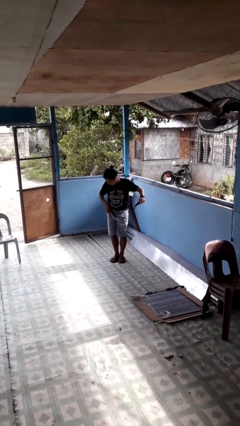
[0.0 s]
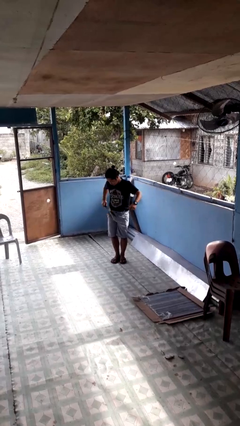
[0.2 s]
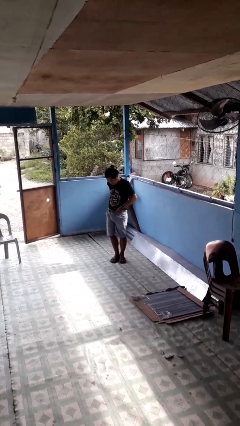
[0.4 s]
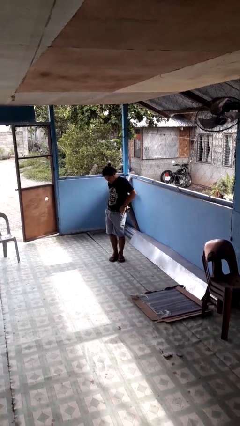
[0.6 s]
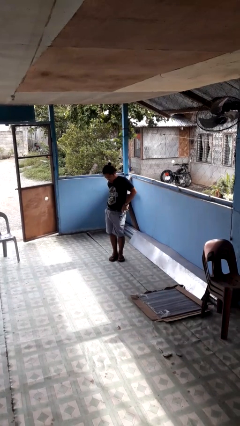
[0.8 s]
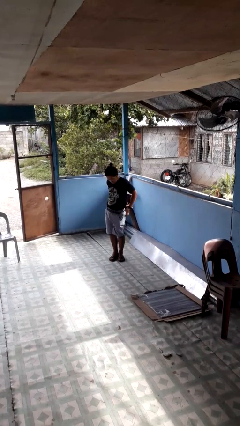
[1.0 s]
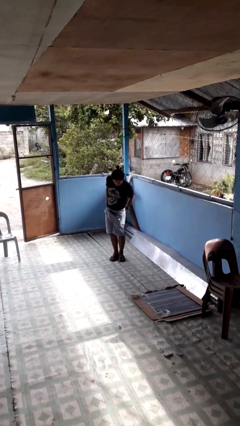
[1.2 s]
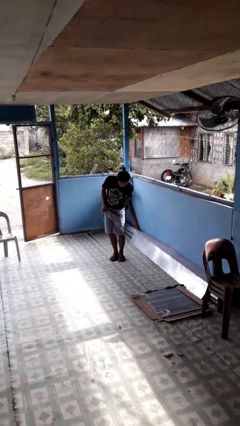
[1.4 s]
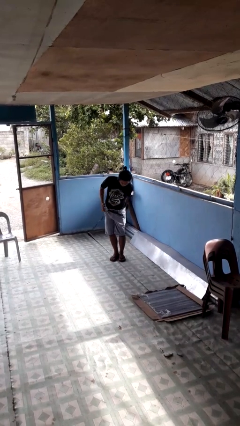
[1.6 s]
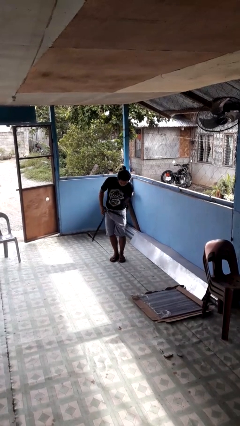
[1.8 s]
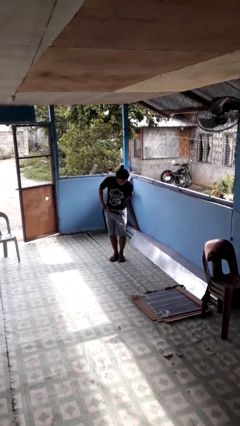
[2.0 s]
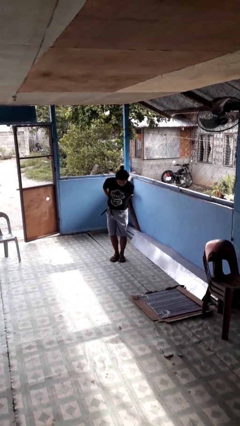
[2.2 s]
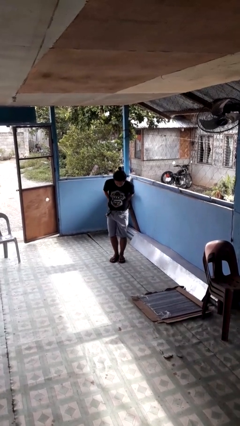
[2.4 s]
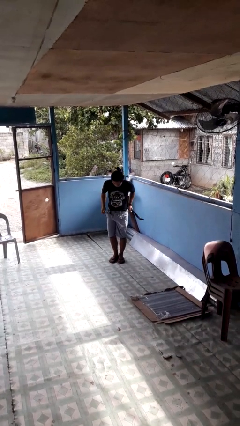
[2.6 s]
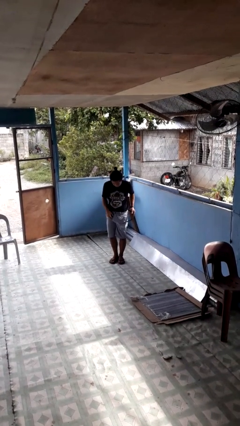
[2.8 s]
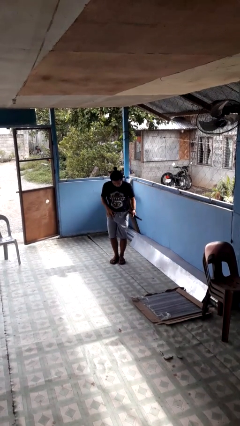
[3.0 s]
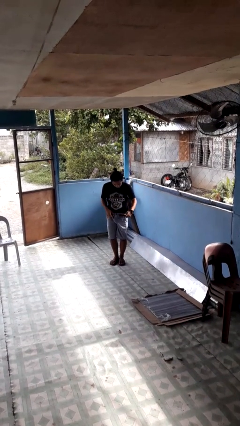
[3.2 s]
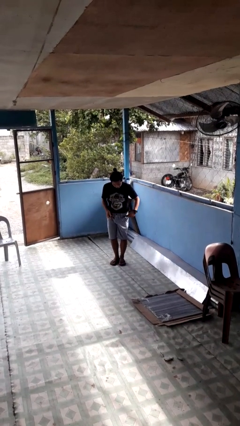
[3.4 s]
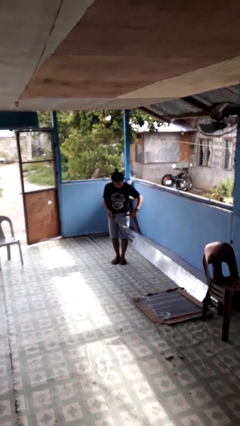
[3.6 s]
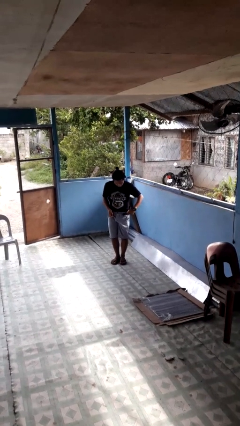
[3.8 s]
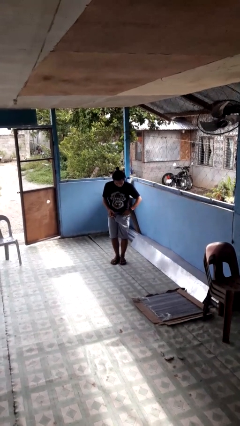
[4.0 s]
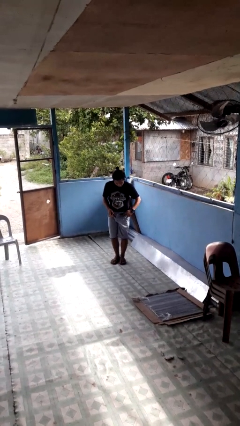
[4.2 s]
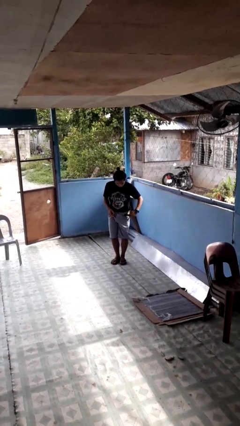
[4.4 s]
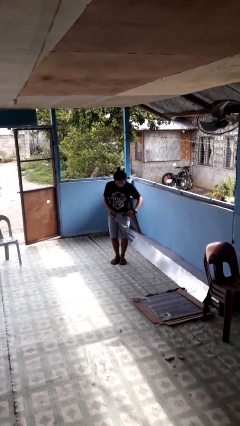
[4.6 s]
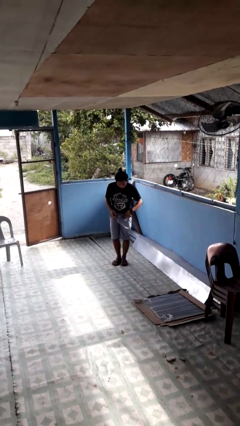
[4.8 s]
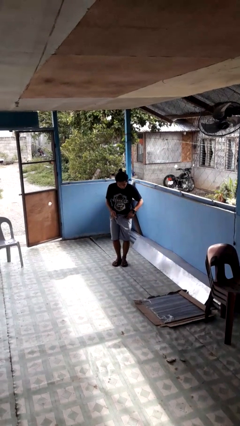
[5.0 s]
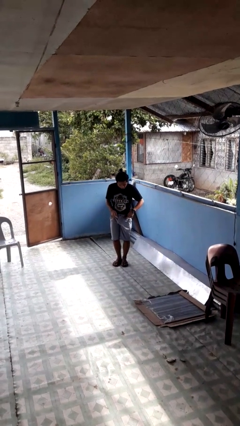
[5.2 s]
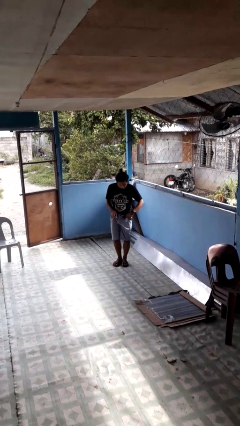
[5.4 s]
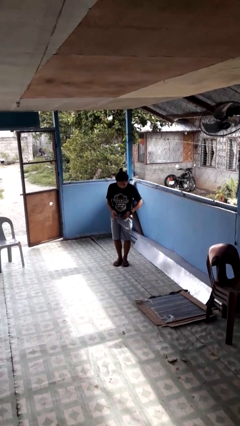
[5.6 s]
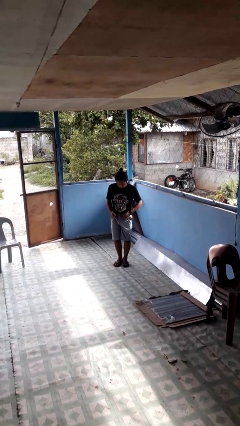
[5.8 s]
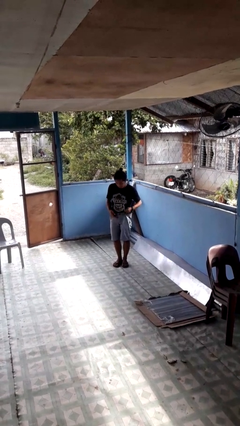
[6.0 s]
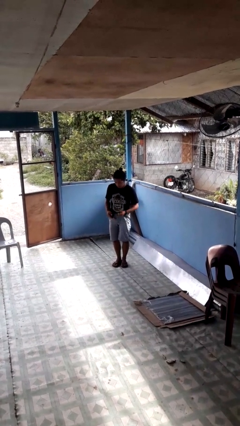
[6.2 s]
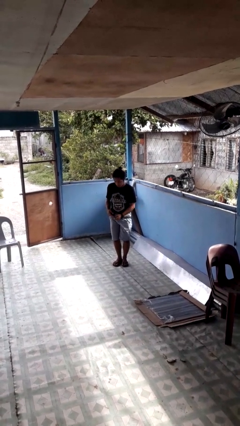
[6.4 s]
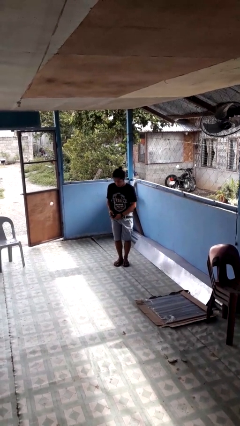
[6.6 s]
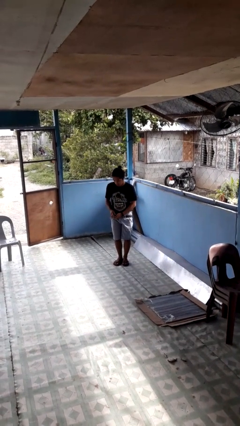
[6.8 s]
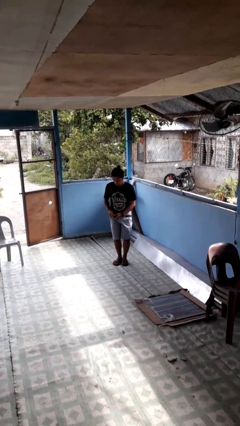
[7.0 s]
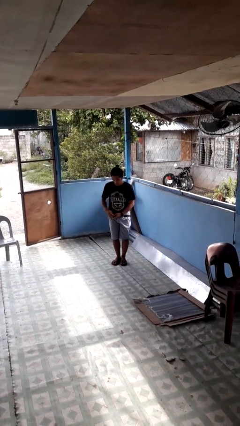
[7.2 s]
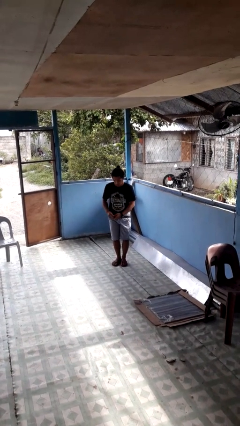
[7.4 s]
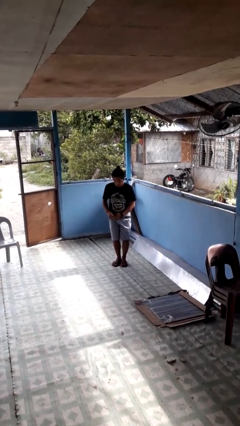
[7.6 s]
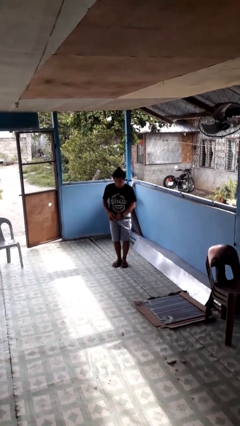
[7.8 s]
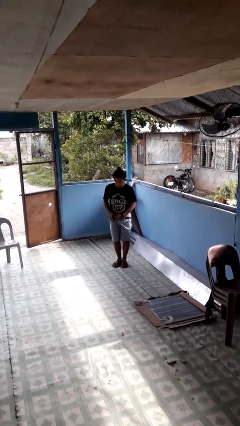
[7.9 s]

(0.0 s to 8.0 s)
person puts on belt

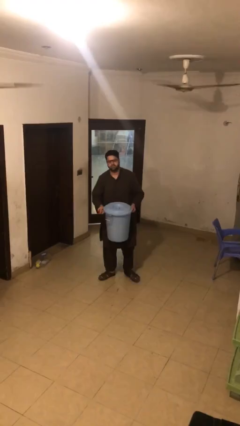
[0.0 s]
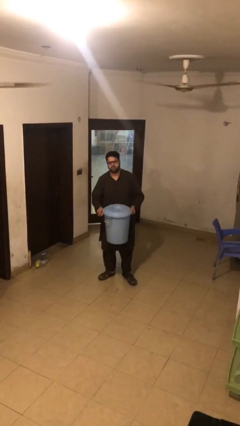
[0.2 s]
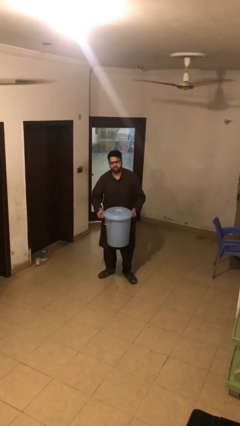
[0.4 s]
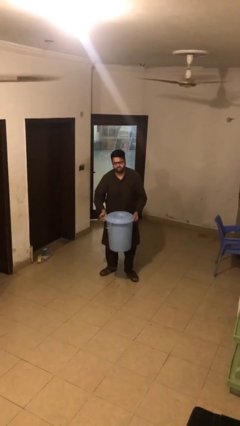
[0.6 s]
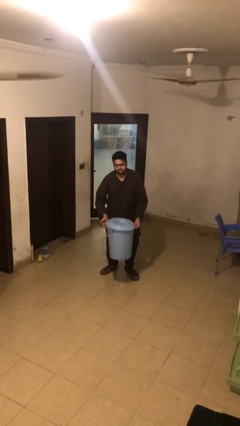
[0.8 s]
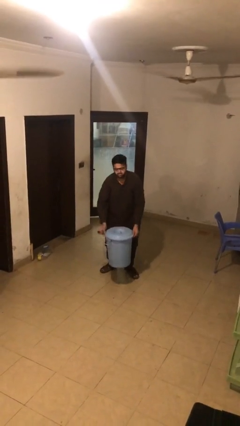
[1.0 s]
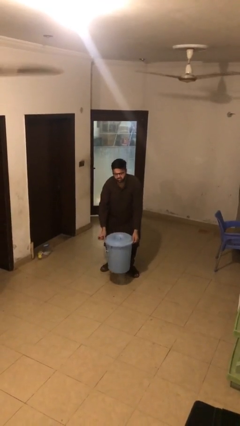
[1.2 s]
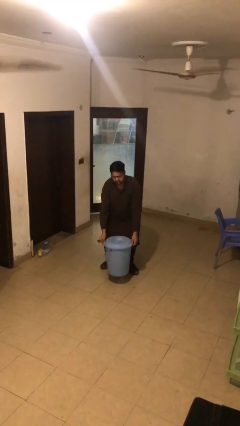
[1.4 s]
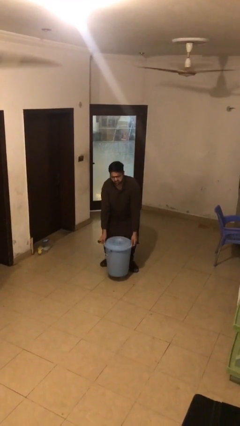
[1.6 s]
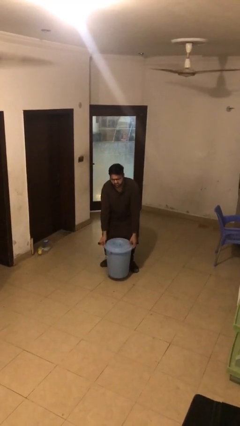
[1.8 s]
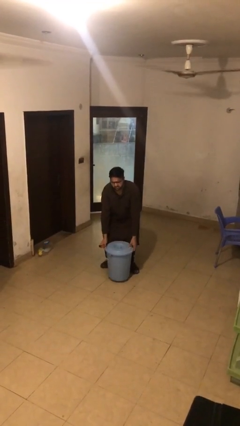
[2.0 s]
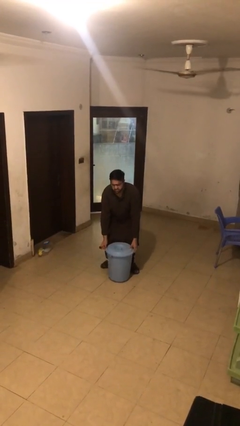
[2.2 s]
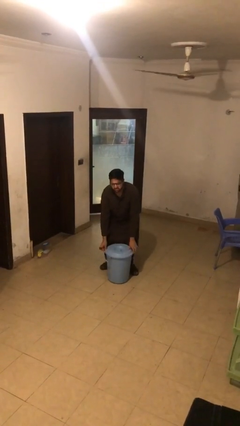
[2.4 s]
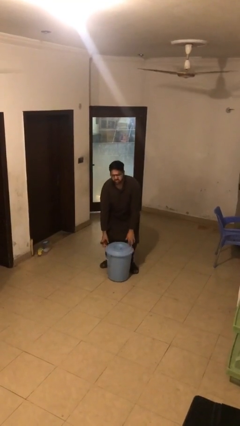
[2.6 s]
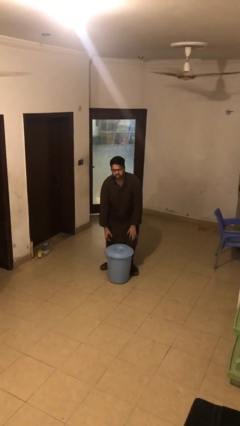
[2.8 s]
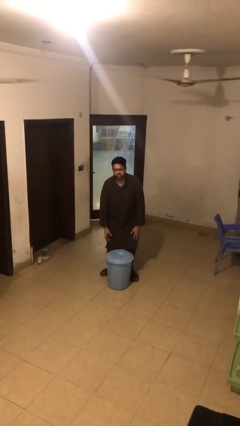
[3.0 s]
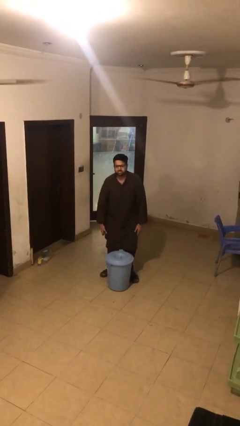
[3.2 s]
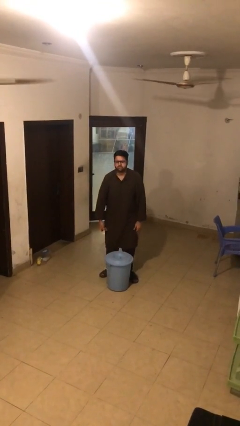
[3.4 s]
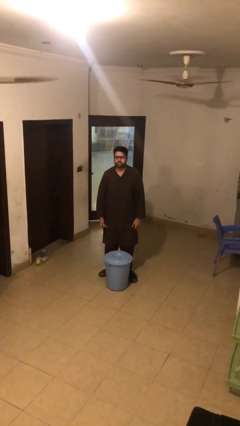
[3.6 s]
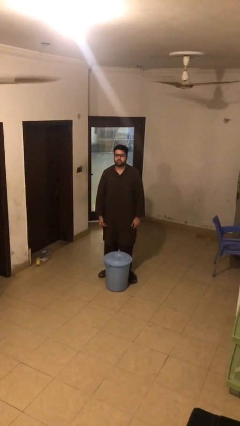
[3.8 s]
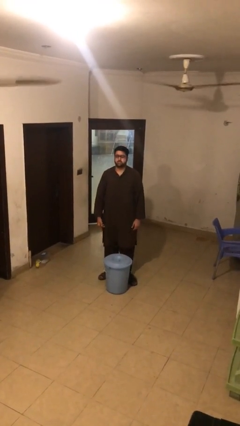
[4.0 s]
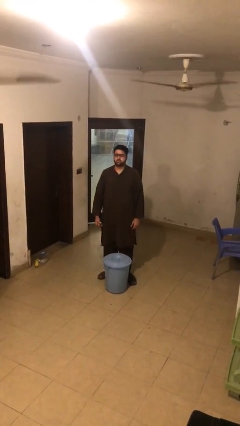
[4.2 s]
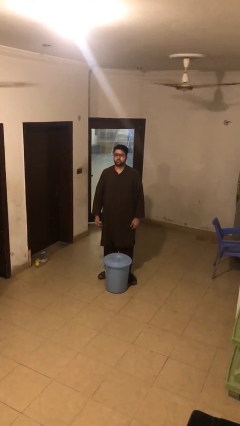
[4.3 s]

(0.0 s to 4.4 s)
person puts down object on floor

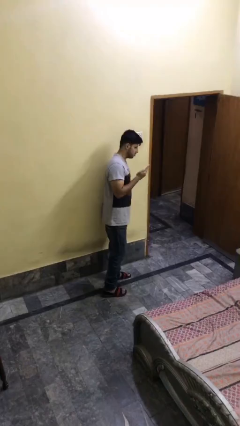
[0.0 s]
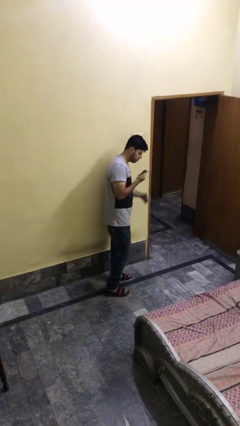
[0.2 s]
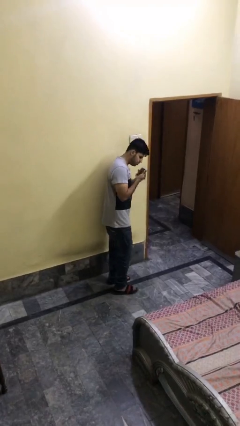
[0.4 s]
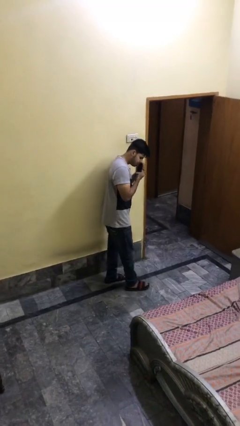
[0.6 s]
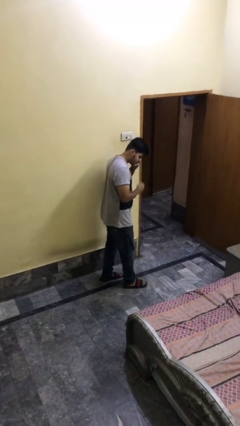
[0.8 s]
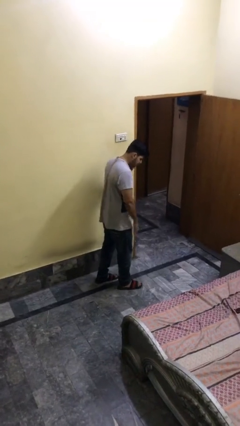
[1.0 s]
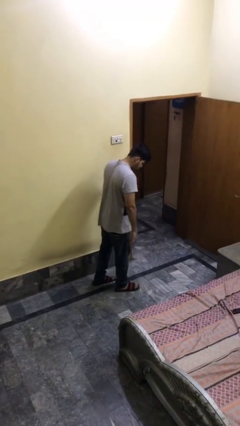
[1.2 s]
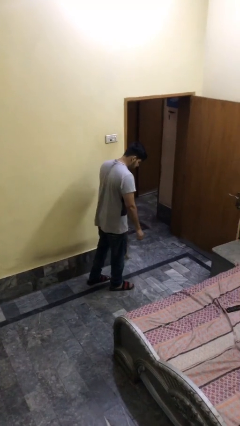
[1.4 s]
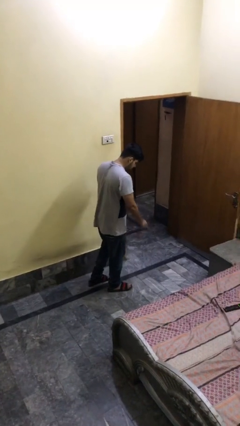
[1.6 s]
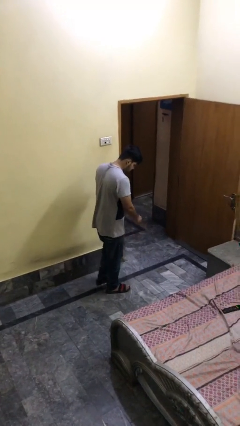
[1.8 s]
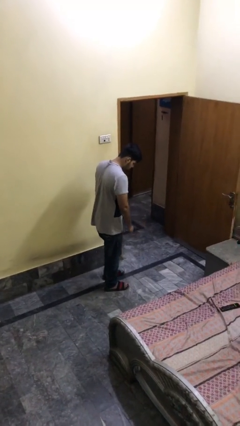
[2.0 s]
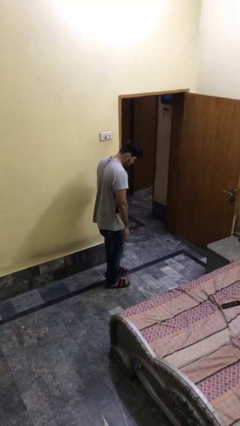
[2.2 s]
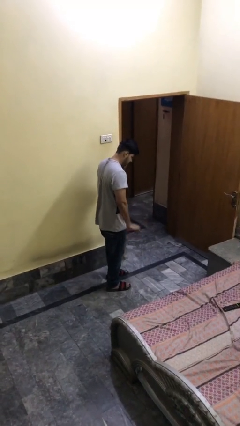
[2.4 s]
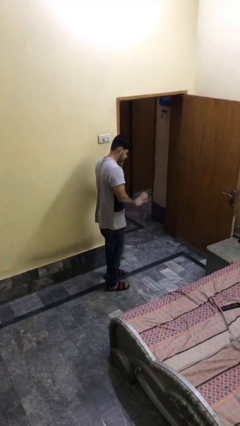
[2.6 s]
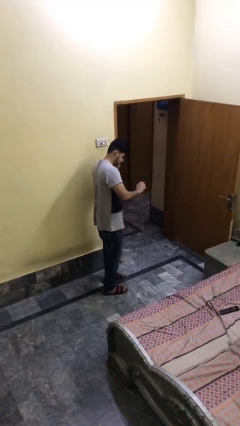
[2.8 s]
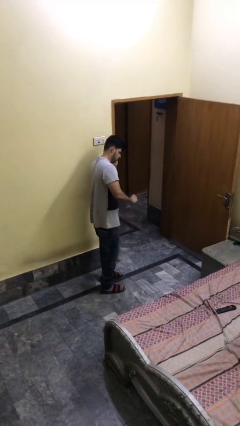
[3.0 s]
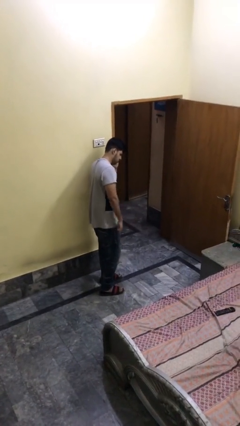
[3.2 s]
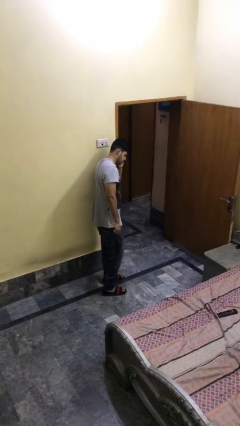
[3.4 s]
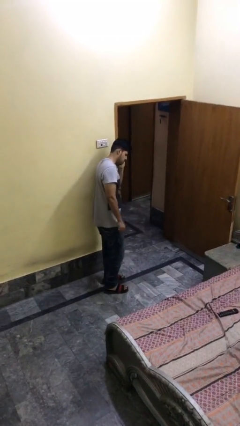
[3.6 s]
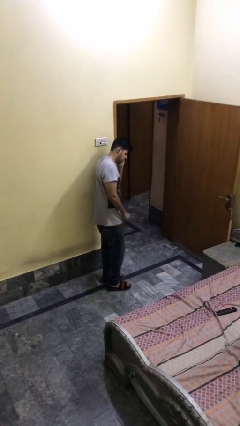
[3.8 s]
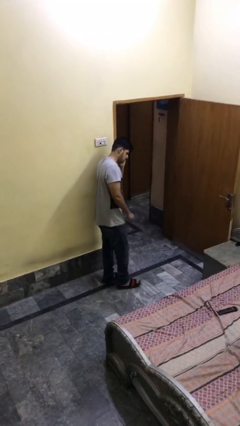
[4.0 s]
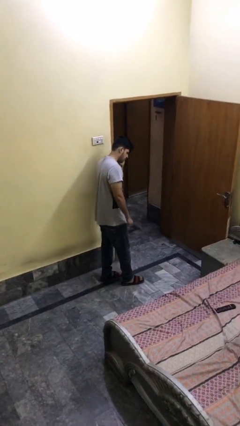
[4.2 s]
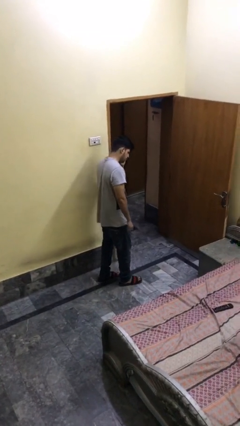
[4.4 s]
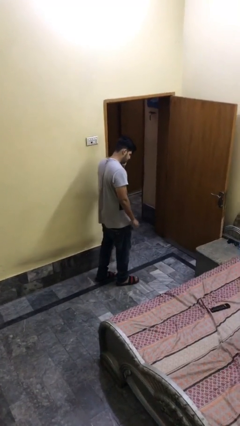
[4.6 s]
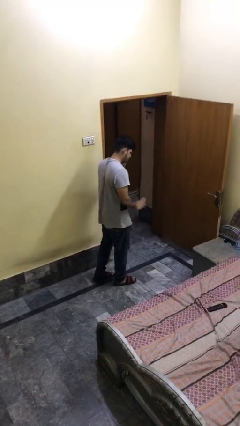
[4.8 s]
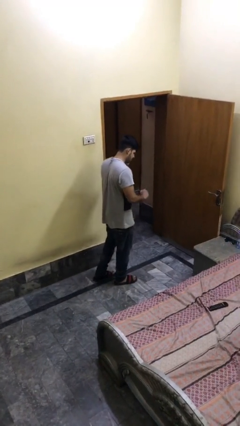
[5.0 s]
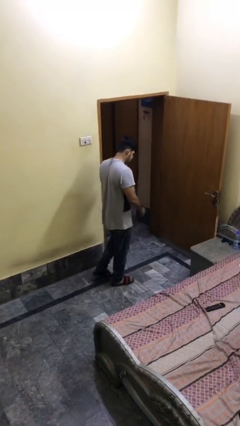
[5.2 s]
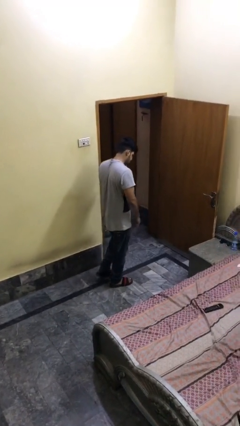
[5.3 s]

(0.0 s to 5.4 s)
person talks on phone

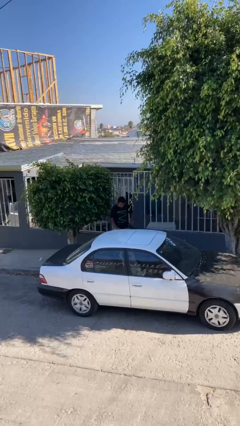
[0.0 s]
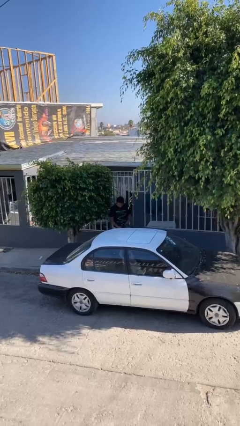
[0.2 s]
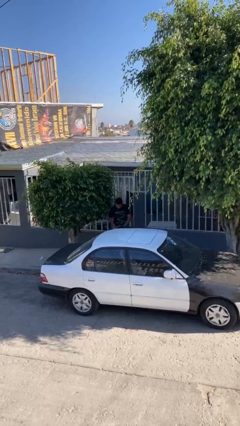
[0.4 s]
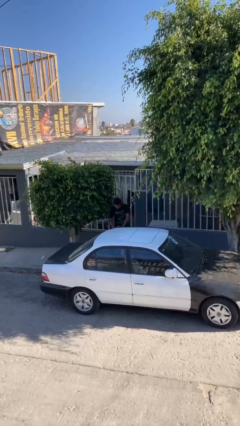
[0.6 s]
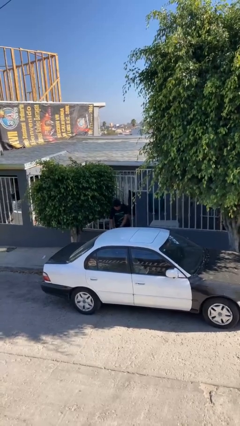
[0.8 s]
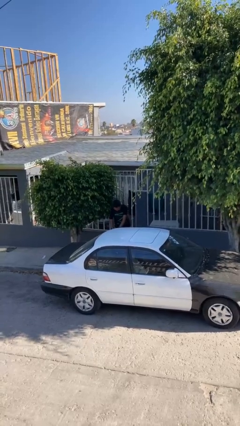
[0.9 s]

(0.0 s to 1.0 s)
person closes car door
